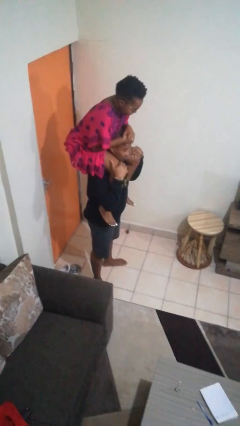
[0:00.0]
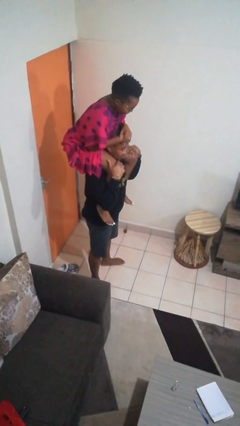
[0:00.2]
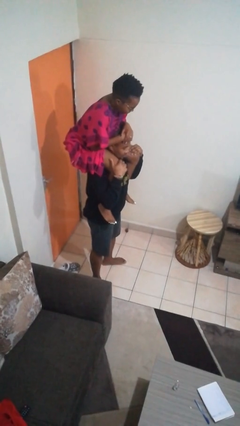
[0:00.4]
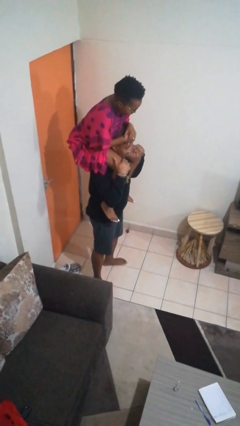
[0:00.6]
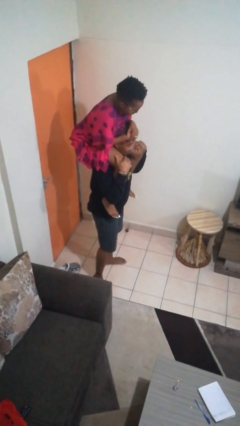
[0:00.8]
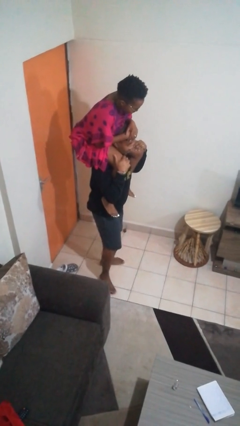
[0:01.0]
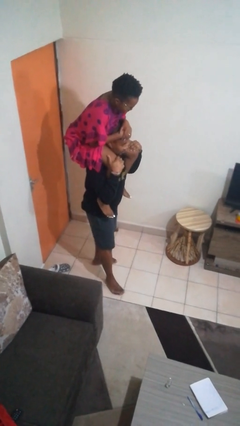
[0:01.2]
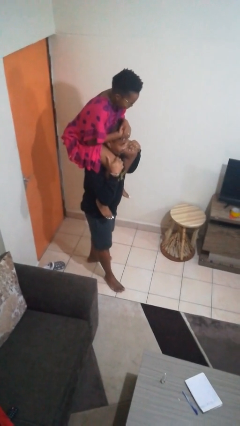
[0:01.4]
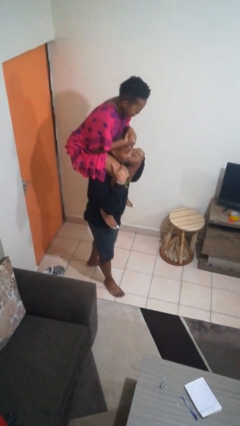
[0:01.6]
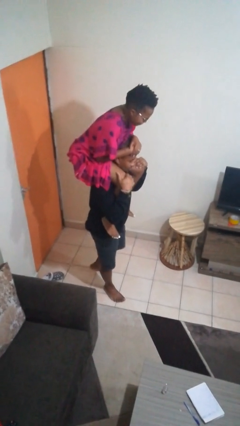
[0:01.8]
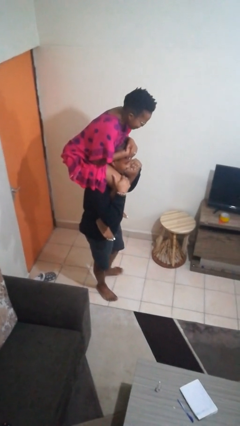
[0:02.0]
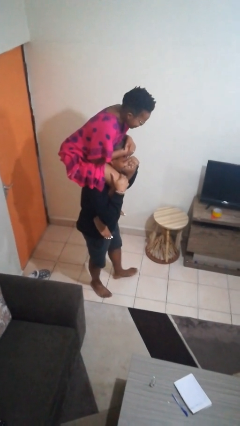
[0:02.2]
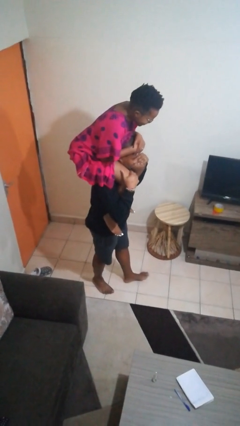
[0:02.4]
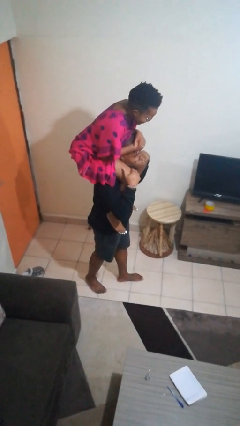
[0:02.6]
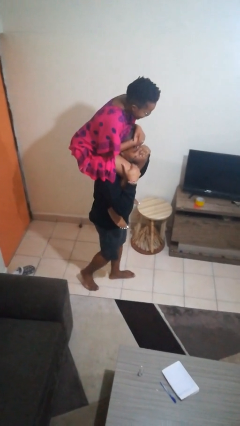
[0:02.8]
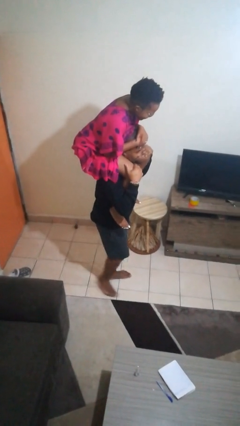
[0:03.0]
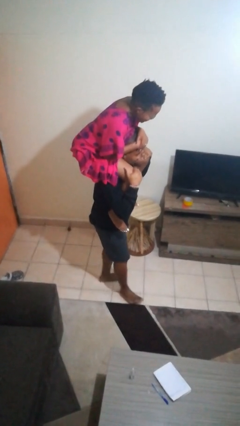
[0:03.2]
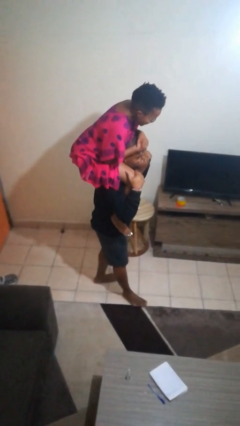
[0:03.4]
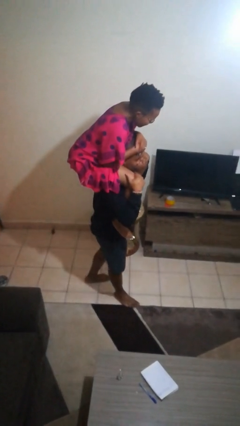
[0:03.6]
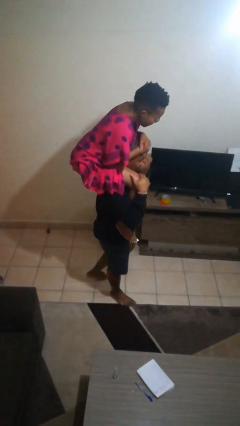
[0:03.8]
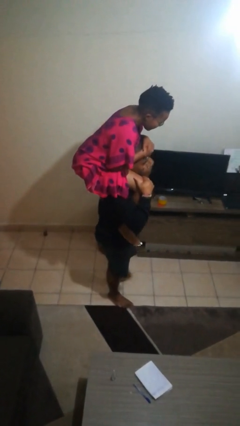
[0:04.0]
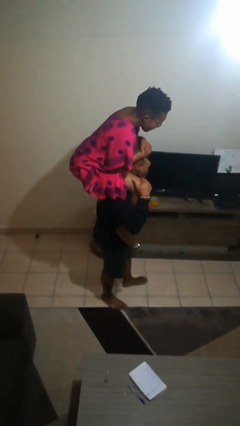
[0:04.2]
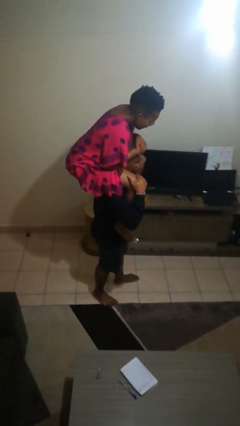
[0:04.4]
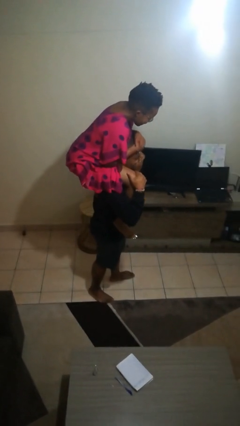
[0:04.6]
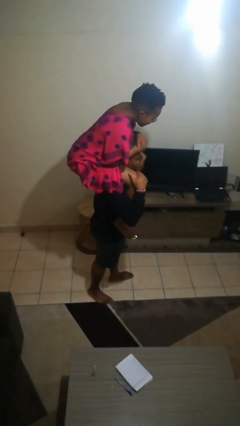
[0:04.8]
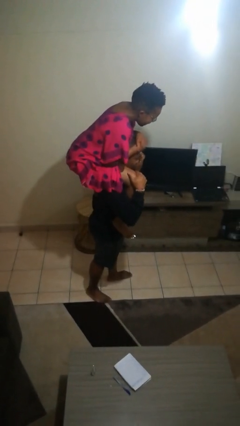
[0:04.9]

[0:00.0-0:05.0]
person carries person on shoulders

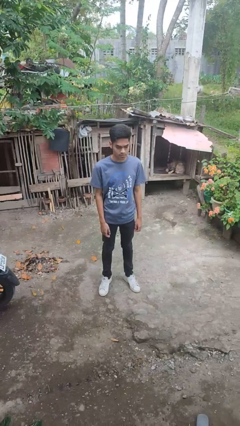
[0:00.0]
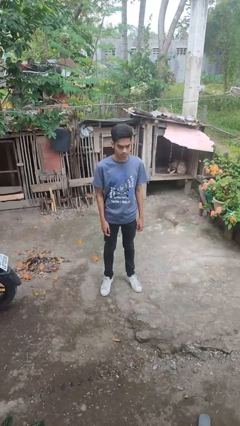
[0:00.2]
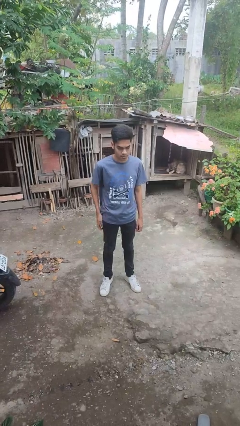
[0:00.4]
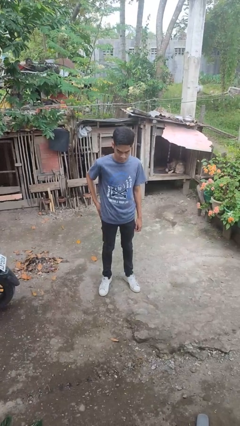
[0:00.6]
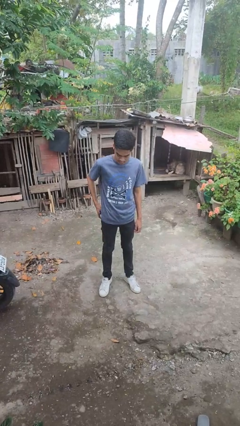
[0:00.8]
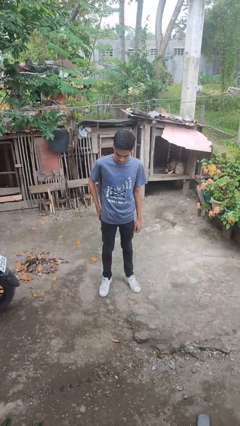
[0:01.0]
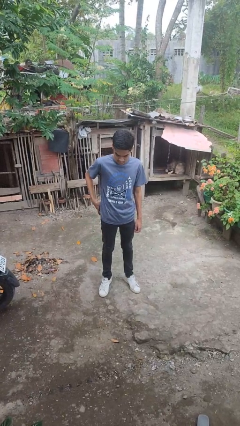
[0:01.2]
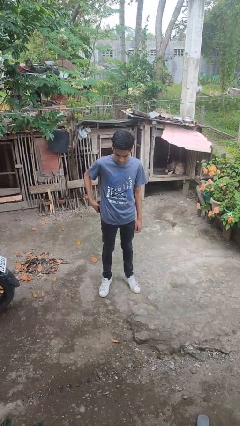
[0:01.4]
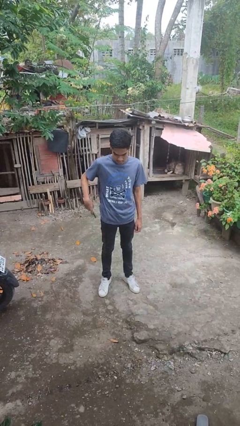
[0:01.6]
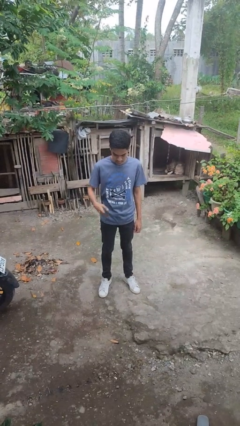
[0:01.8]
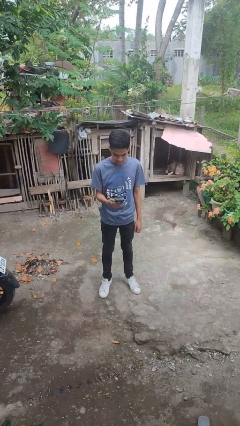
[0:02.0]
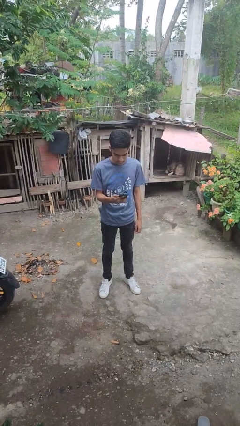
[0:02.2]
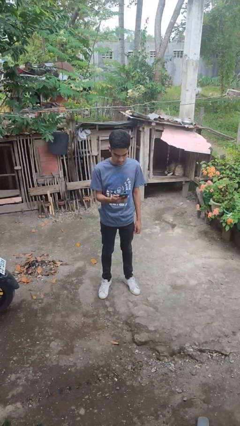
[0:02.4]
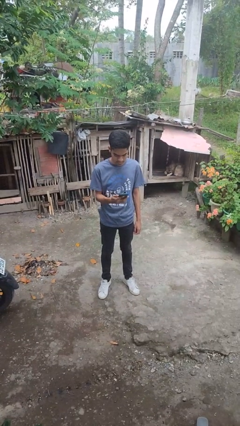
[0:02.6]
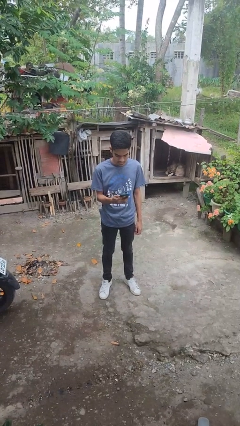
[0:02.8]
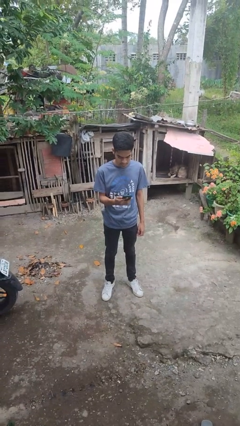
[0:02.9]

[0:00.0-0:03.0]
person takes phone from pocket

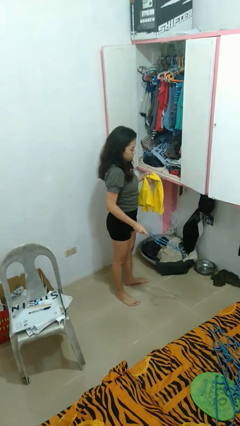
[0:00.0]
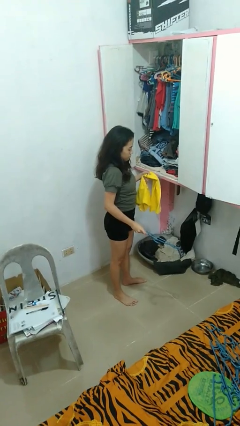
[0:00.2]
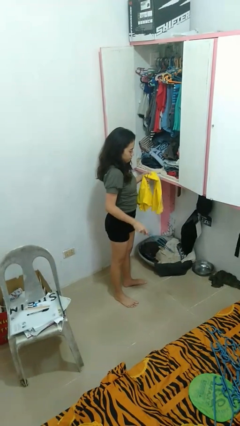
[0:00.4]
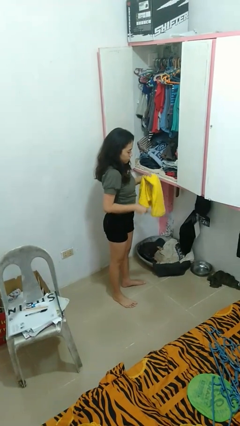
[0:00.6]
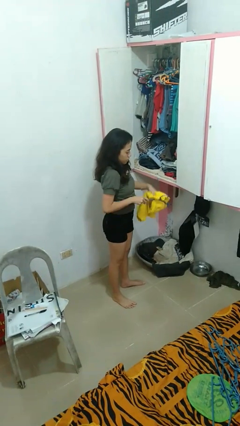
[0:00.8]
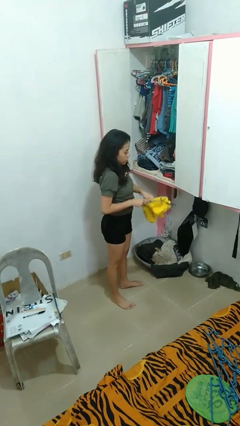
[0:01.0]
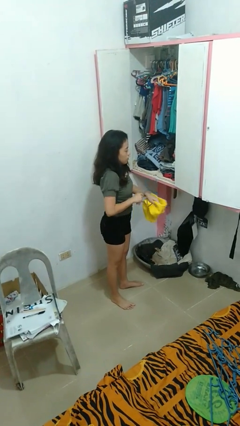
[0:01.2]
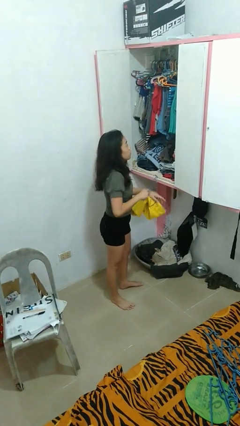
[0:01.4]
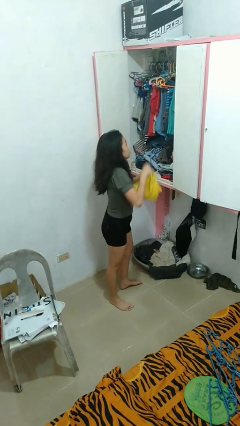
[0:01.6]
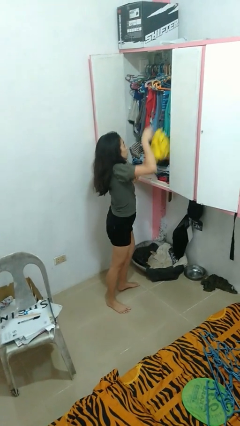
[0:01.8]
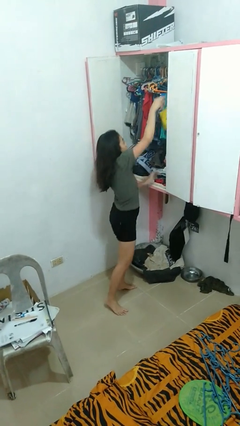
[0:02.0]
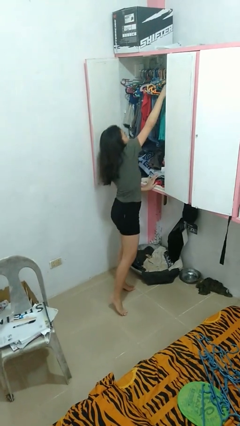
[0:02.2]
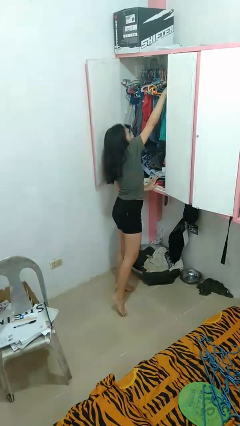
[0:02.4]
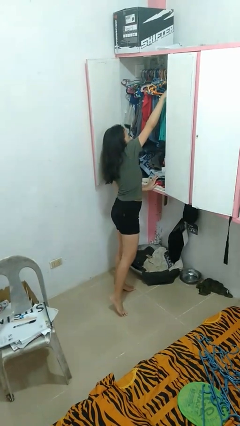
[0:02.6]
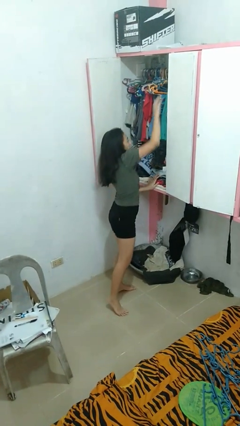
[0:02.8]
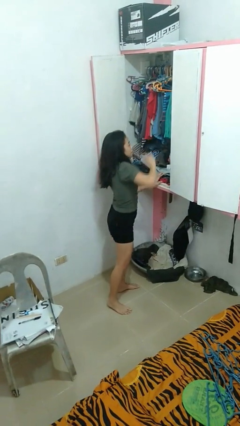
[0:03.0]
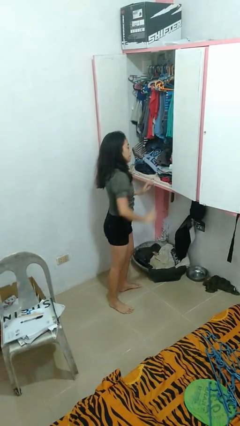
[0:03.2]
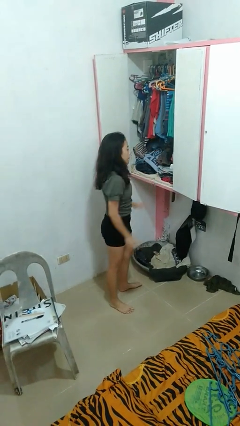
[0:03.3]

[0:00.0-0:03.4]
person puts clothes into closet

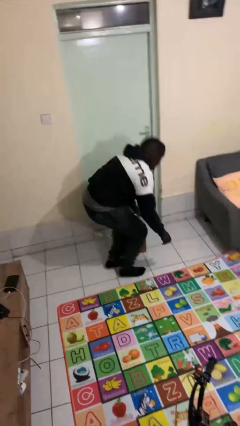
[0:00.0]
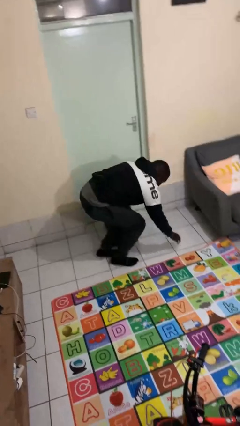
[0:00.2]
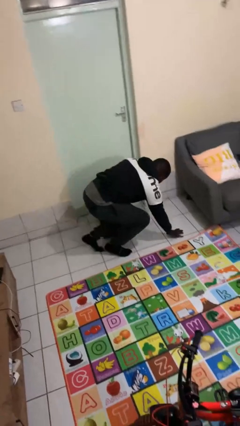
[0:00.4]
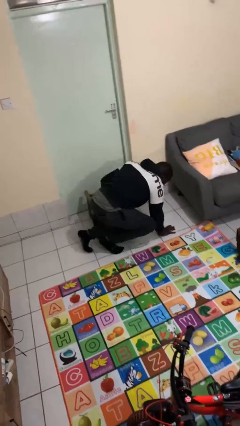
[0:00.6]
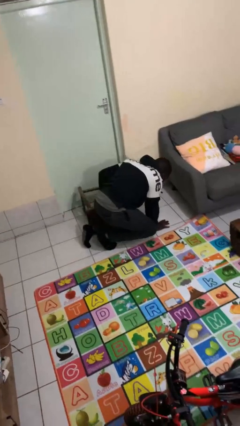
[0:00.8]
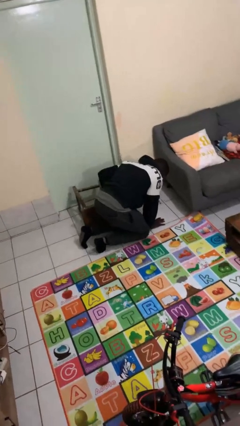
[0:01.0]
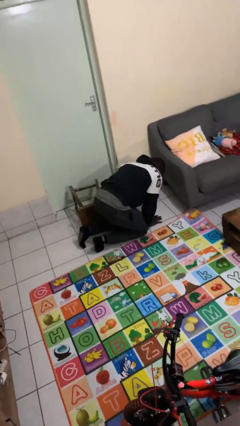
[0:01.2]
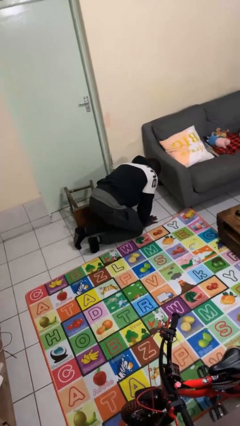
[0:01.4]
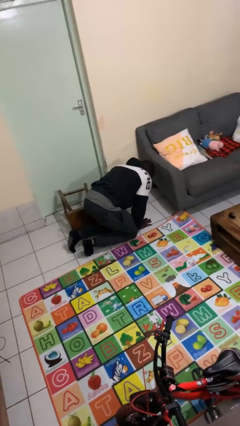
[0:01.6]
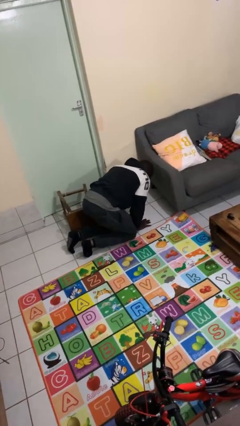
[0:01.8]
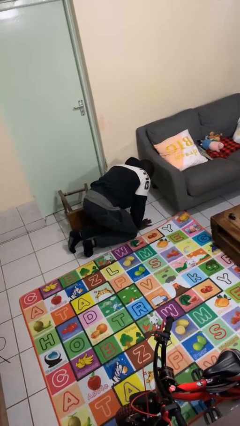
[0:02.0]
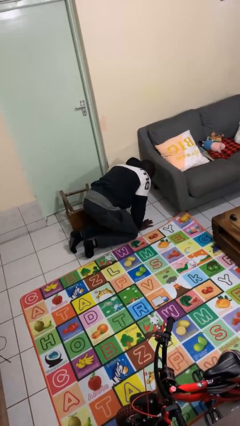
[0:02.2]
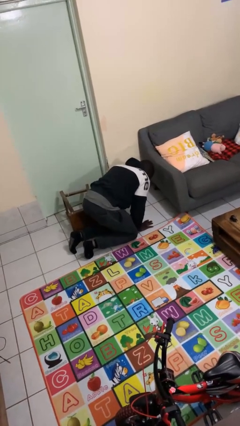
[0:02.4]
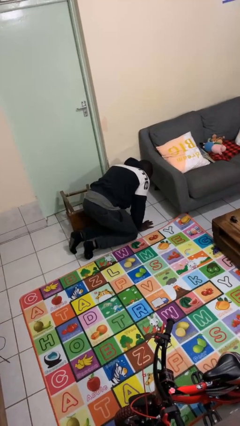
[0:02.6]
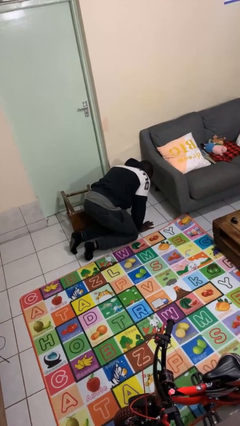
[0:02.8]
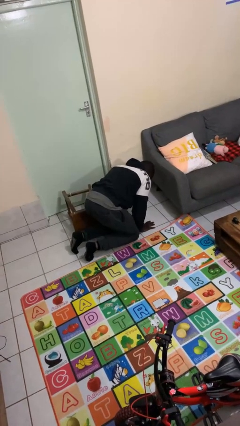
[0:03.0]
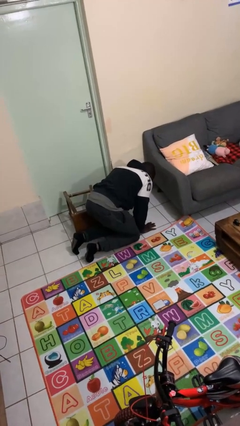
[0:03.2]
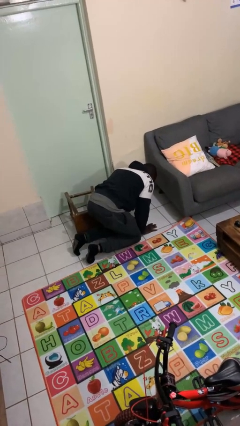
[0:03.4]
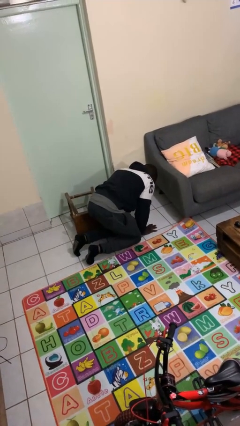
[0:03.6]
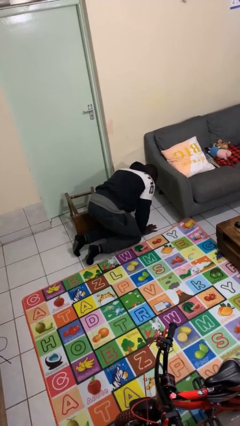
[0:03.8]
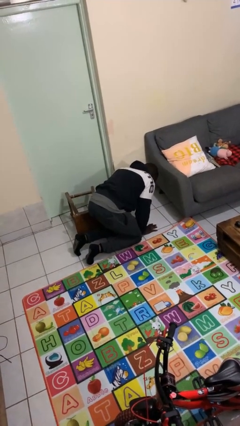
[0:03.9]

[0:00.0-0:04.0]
person trips on object on floor

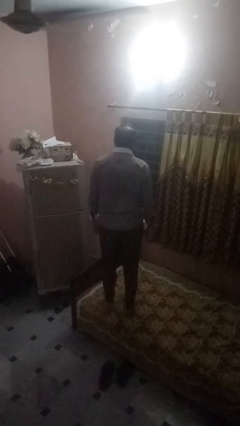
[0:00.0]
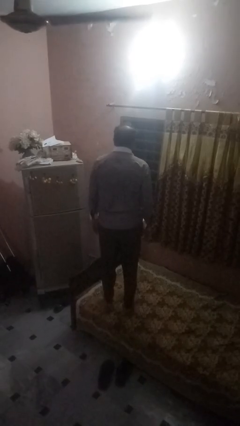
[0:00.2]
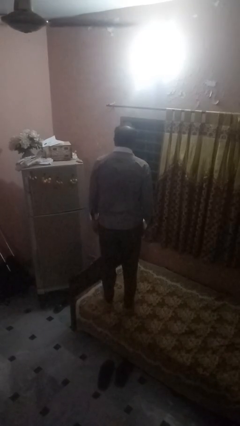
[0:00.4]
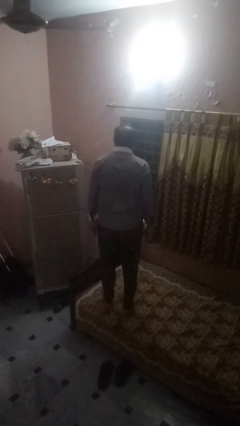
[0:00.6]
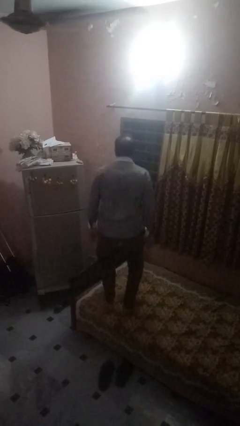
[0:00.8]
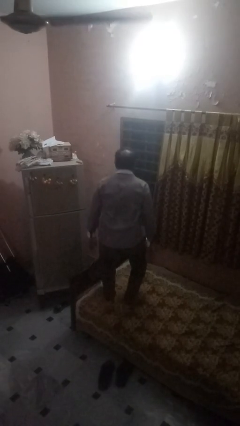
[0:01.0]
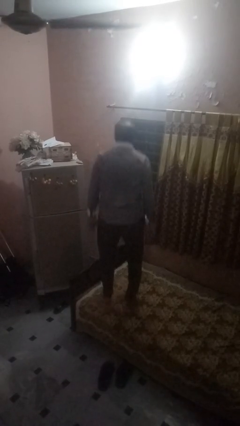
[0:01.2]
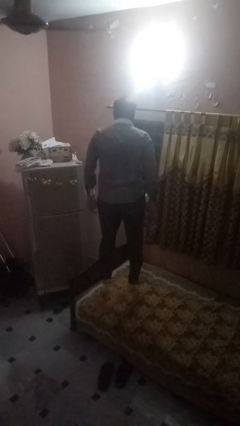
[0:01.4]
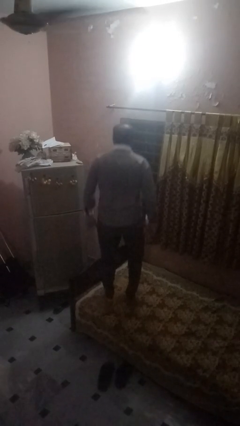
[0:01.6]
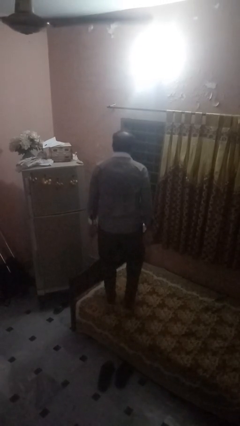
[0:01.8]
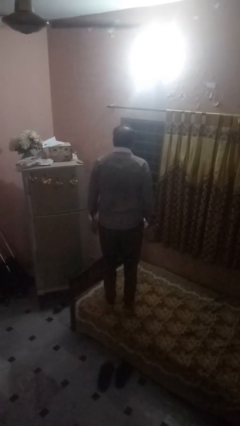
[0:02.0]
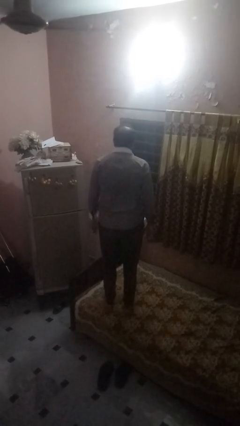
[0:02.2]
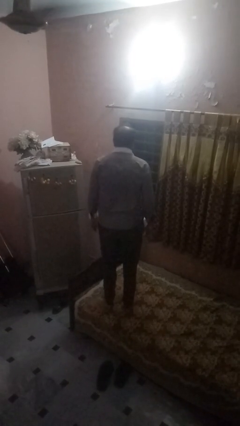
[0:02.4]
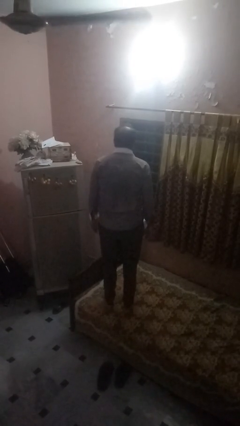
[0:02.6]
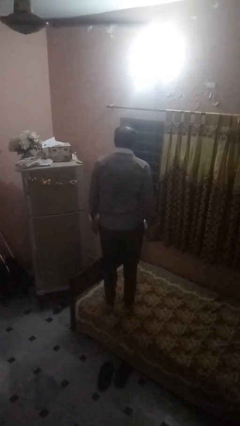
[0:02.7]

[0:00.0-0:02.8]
person jumps on bed
